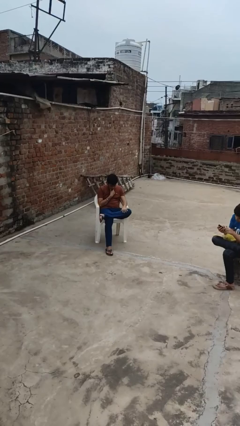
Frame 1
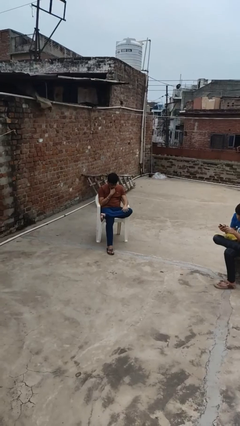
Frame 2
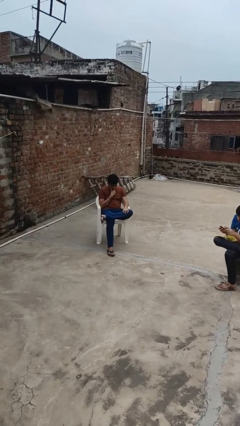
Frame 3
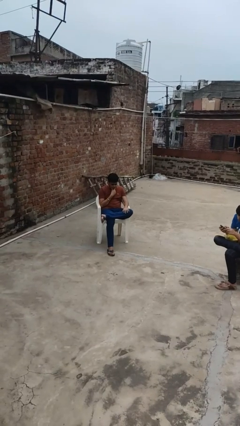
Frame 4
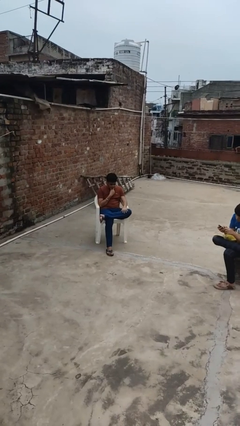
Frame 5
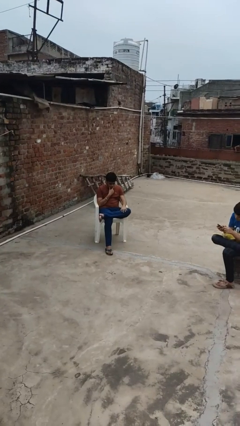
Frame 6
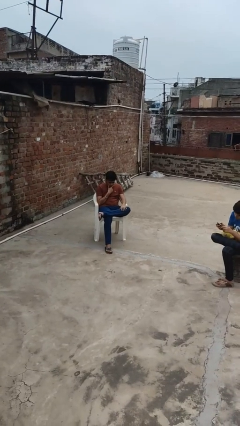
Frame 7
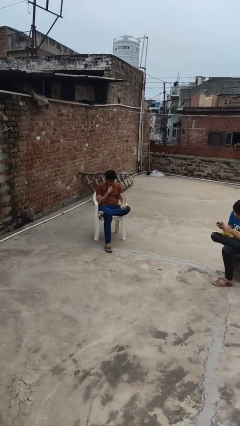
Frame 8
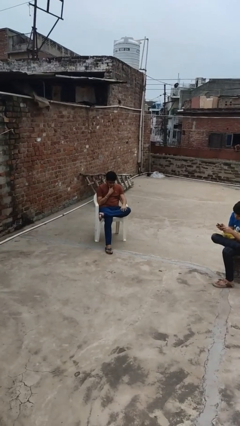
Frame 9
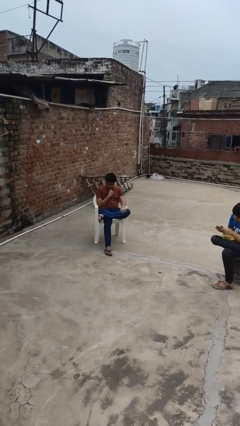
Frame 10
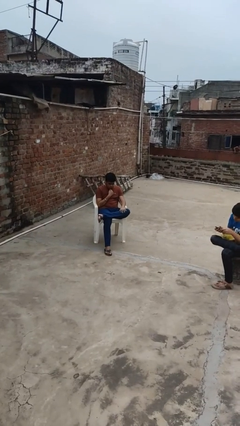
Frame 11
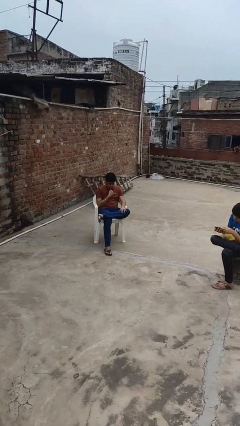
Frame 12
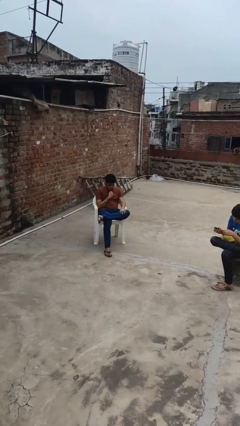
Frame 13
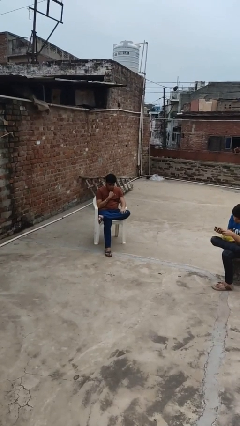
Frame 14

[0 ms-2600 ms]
person strokes chin

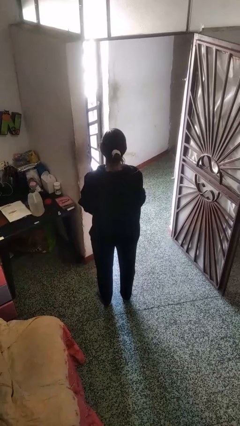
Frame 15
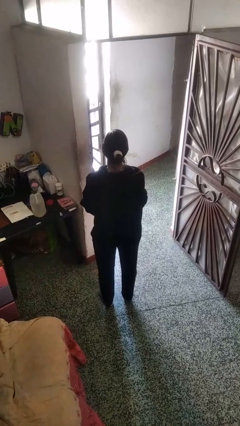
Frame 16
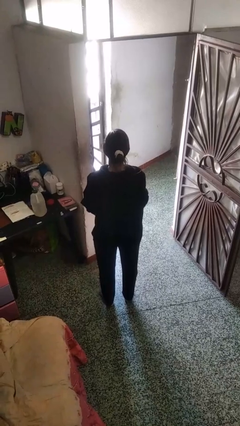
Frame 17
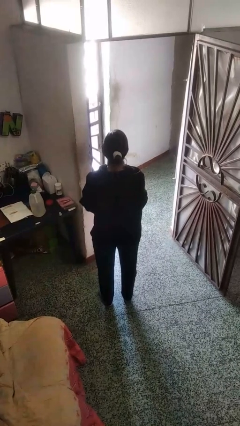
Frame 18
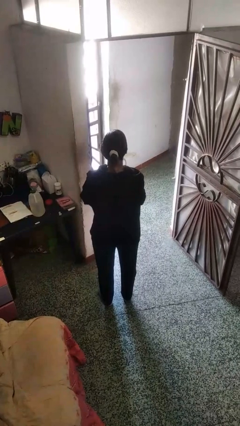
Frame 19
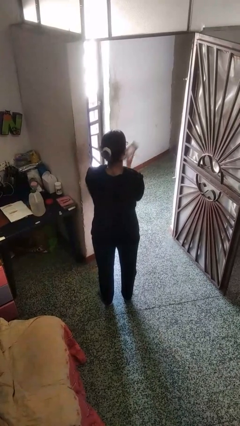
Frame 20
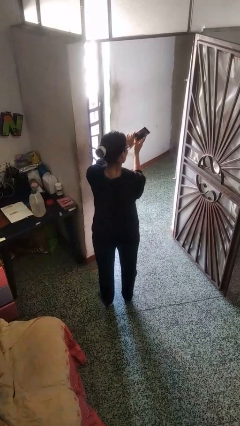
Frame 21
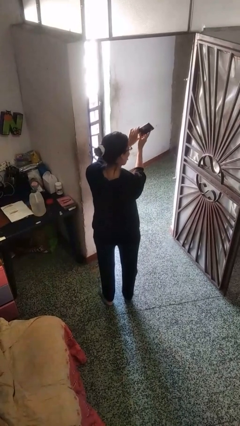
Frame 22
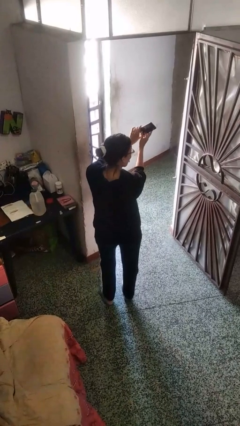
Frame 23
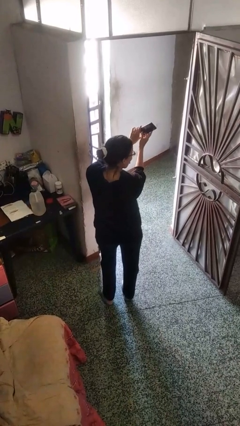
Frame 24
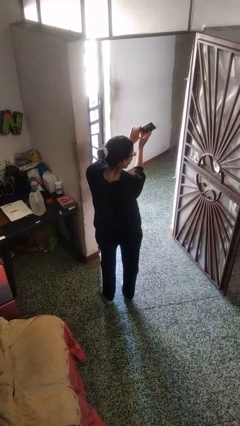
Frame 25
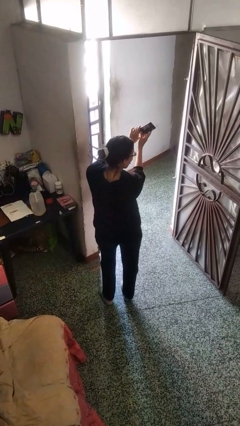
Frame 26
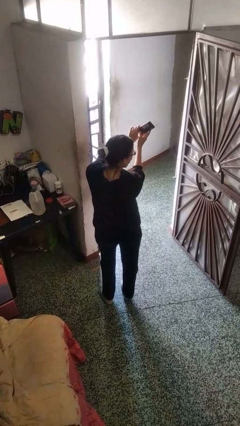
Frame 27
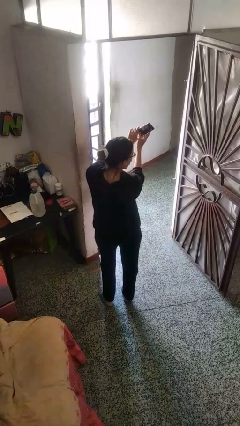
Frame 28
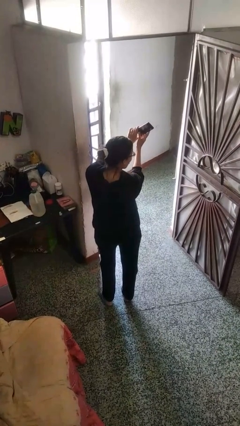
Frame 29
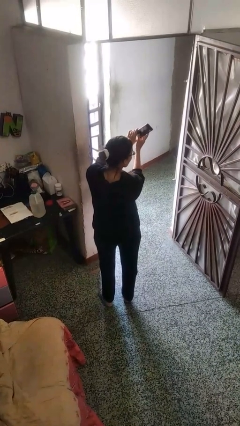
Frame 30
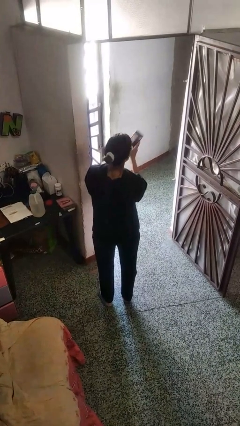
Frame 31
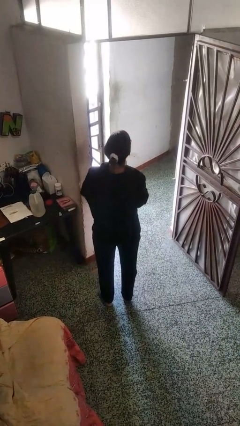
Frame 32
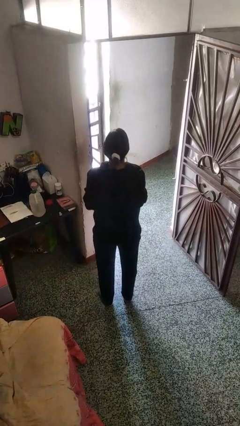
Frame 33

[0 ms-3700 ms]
person takes selfie

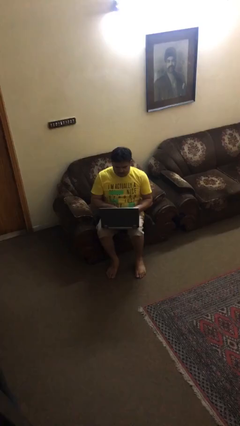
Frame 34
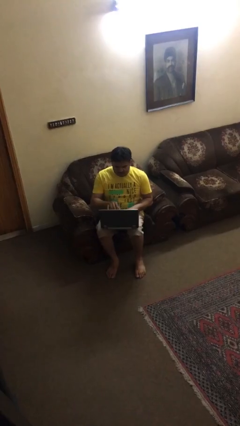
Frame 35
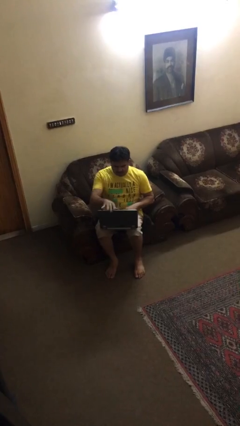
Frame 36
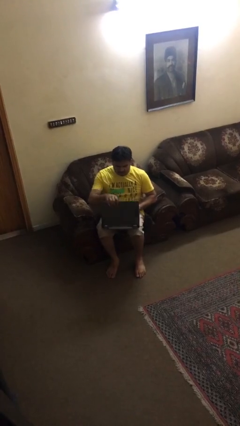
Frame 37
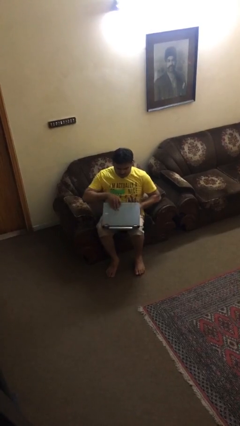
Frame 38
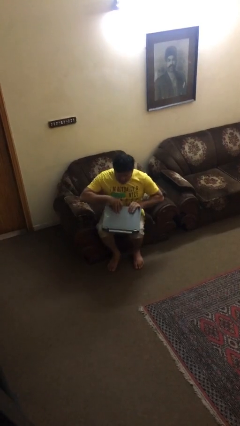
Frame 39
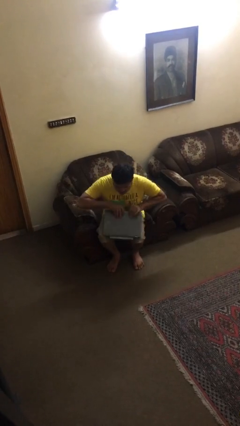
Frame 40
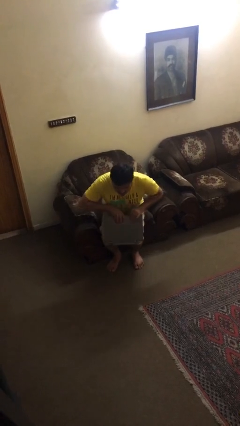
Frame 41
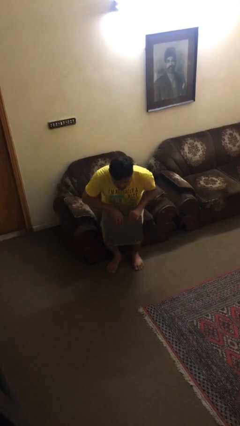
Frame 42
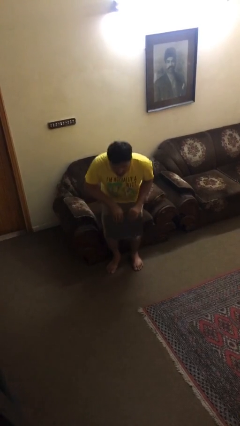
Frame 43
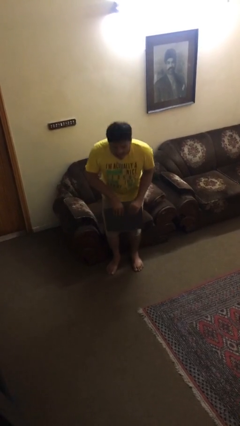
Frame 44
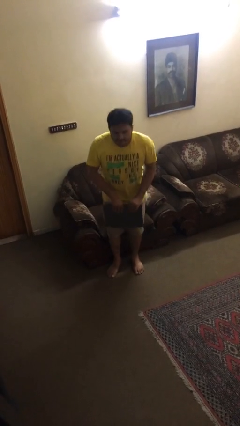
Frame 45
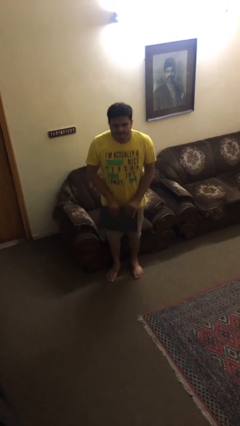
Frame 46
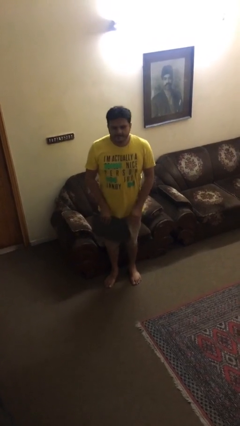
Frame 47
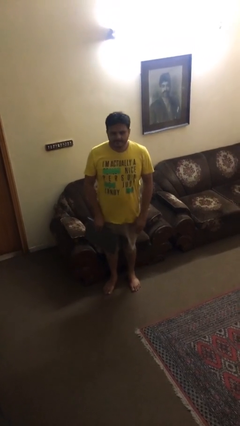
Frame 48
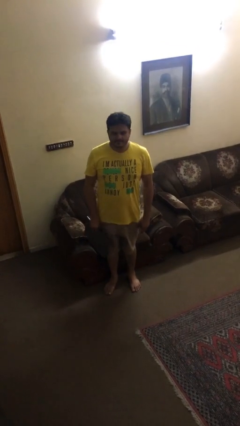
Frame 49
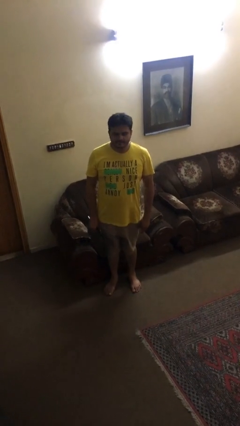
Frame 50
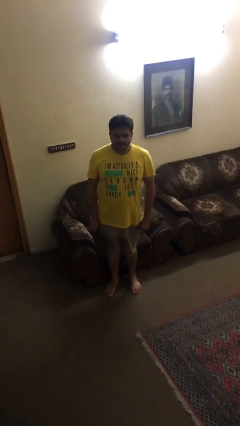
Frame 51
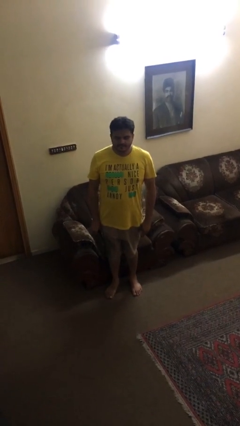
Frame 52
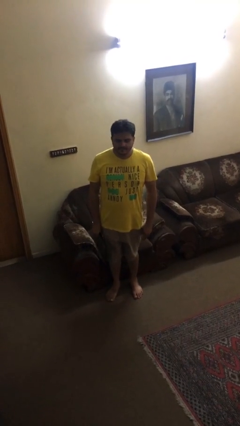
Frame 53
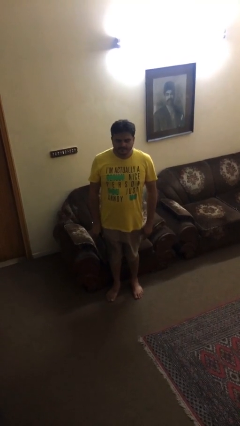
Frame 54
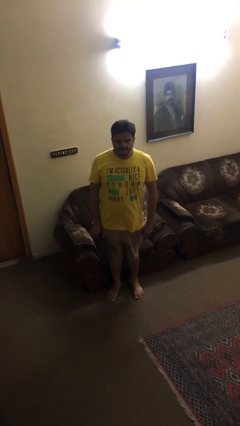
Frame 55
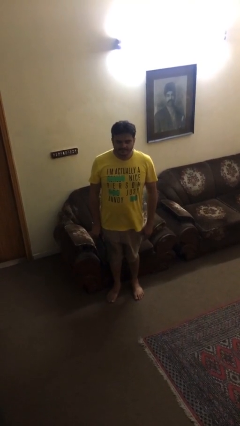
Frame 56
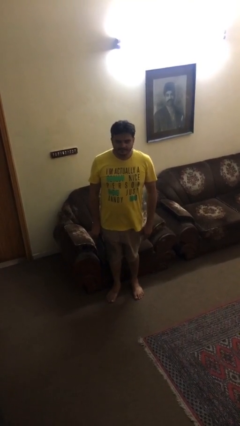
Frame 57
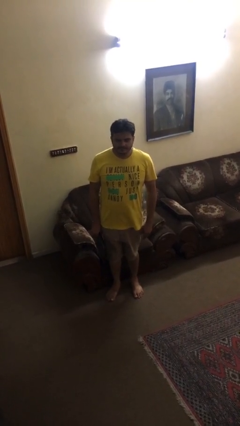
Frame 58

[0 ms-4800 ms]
person stands up

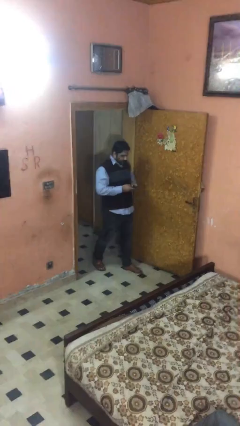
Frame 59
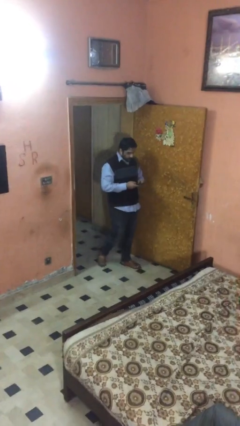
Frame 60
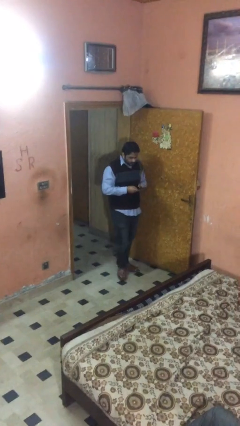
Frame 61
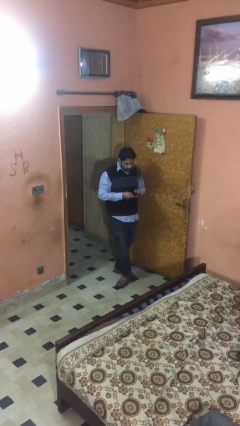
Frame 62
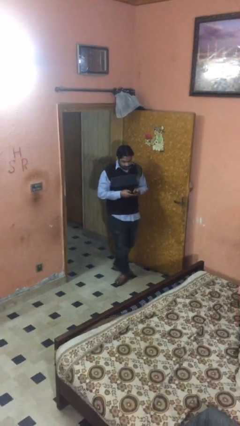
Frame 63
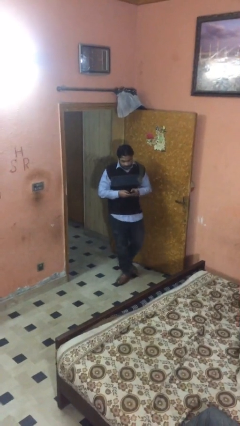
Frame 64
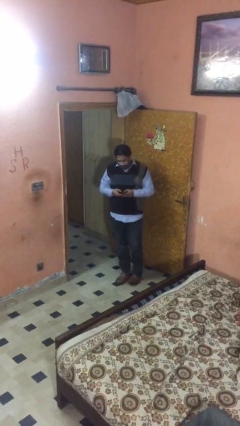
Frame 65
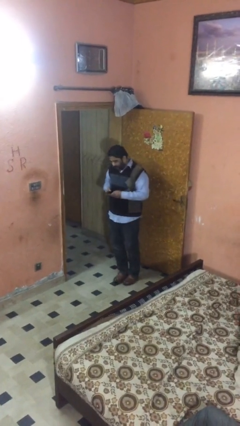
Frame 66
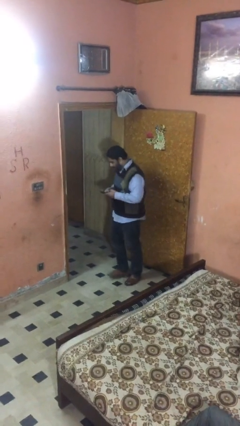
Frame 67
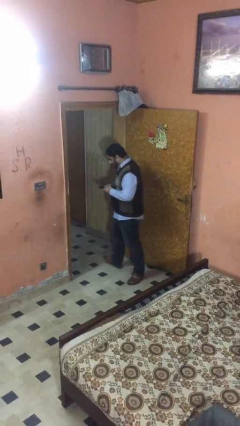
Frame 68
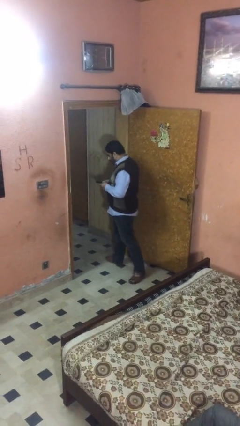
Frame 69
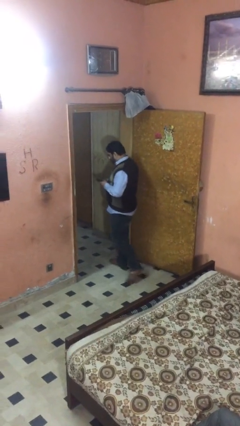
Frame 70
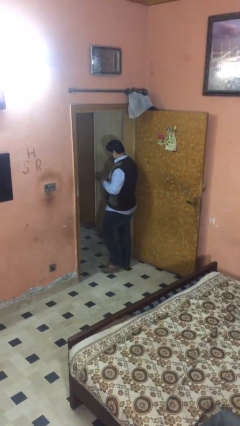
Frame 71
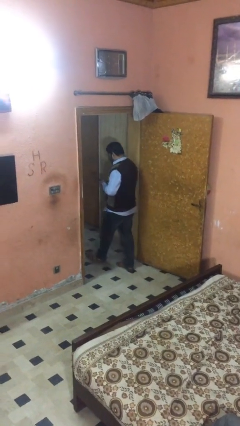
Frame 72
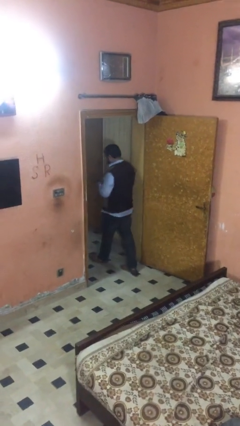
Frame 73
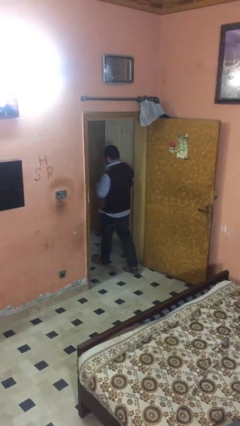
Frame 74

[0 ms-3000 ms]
person exits scene through structure

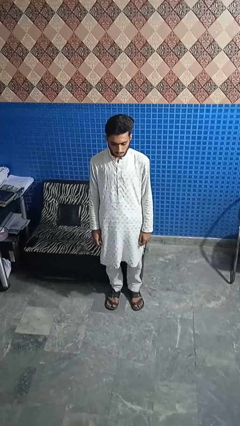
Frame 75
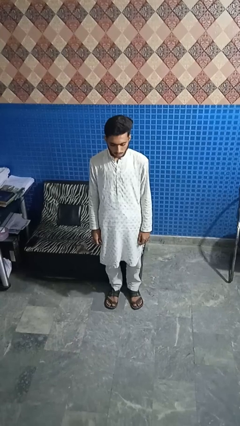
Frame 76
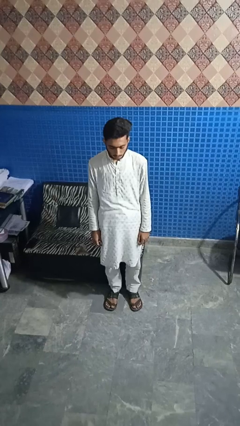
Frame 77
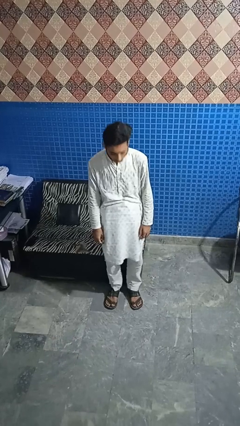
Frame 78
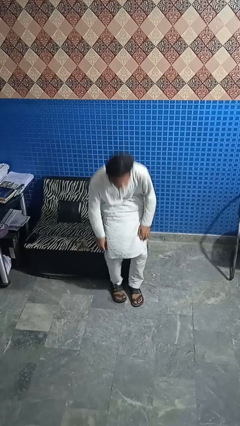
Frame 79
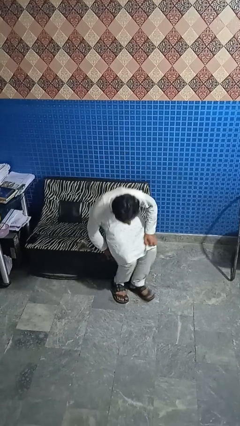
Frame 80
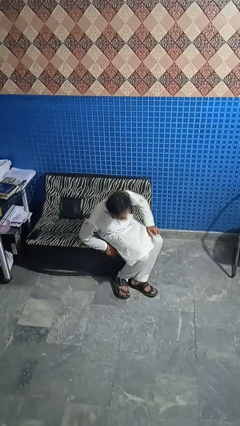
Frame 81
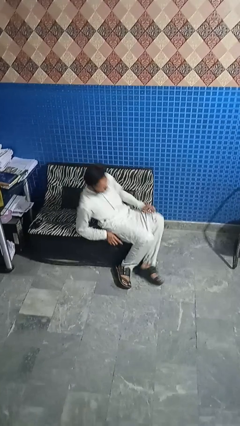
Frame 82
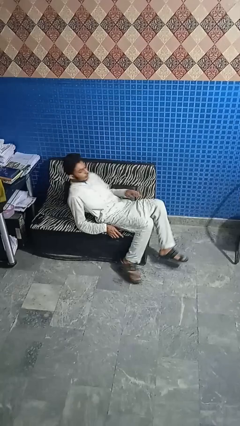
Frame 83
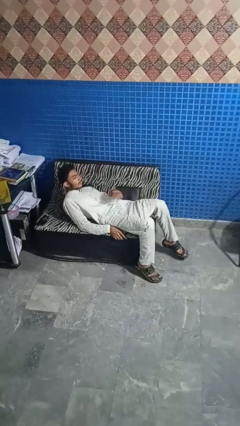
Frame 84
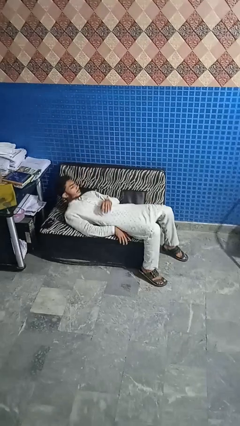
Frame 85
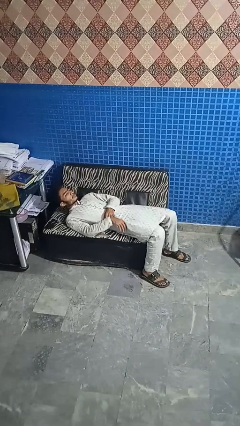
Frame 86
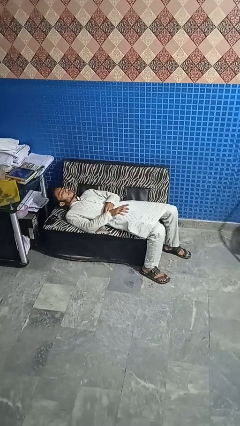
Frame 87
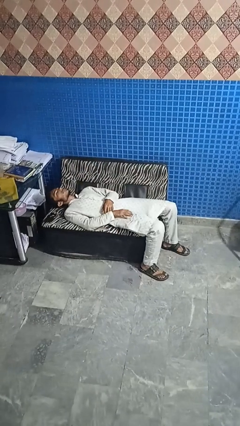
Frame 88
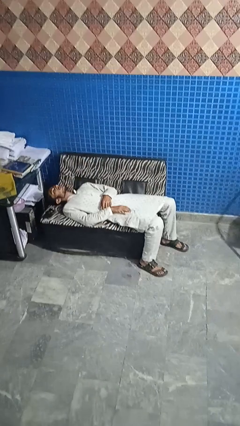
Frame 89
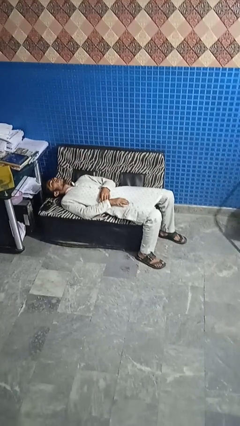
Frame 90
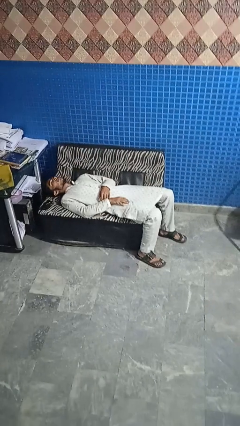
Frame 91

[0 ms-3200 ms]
person lies down on couch

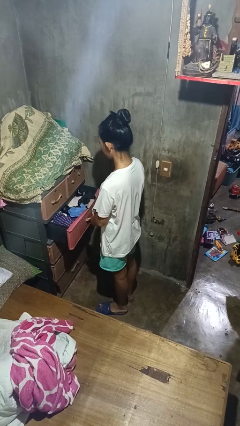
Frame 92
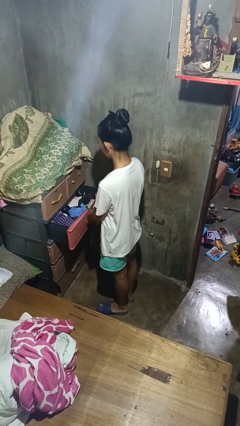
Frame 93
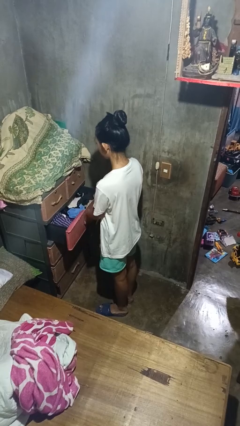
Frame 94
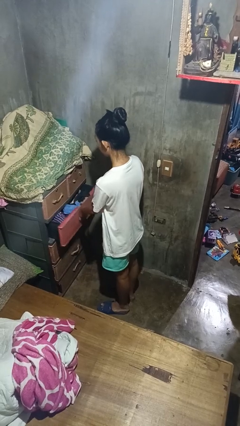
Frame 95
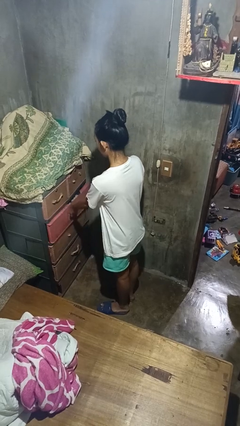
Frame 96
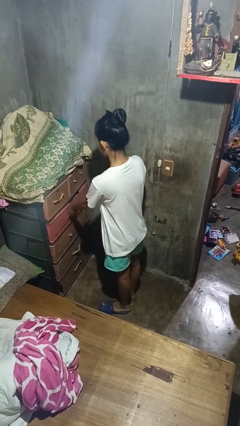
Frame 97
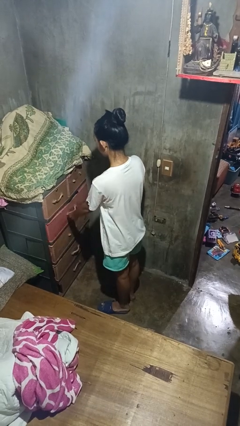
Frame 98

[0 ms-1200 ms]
person closes dresser drawer
